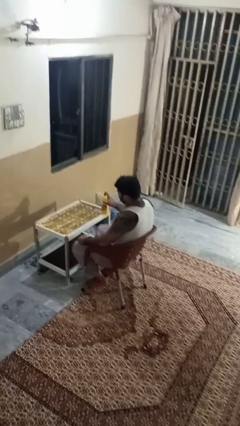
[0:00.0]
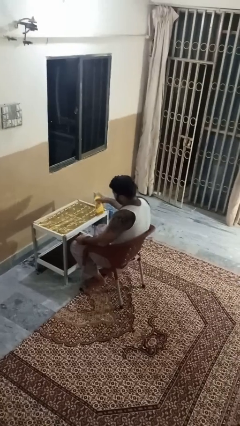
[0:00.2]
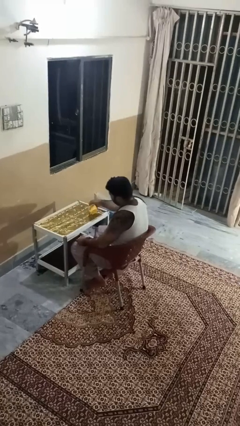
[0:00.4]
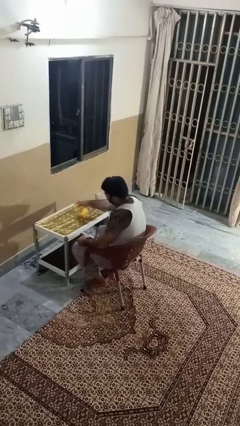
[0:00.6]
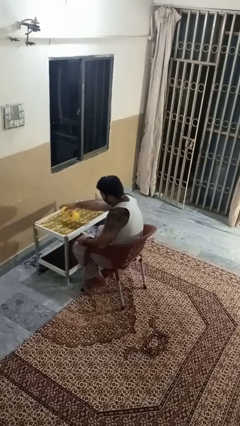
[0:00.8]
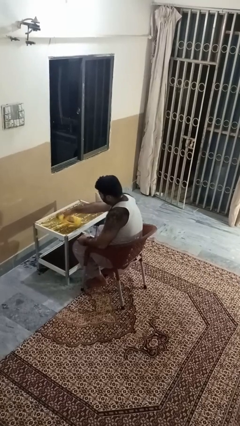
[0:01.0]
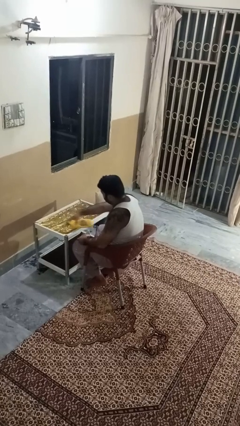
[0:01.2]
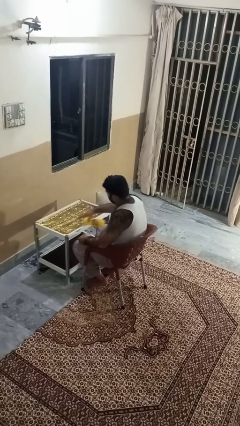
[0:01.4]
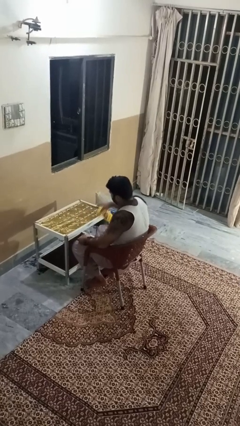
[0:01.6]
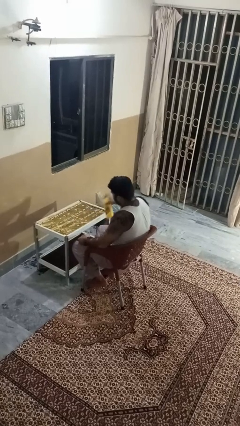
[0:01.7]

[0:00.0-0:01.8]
person sprays from bottle

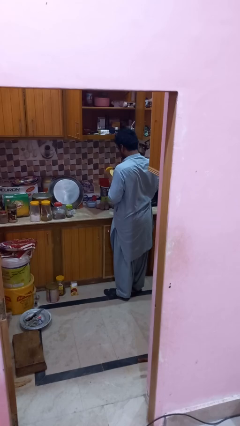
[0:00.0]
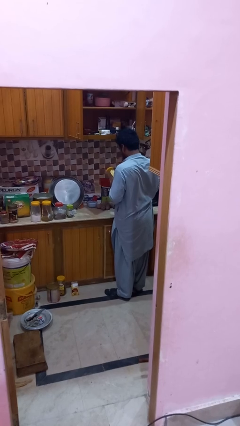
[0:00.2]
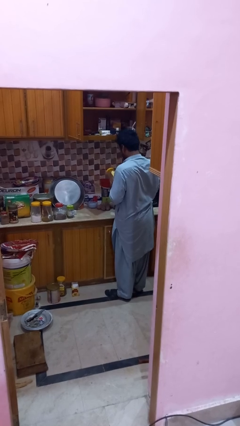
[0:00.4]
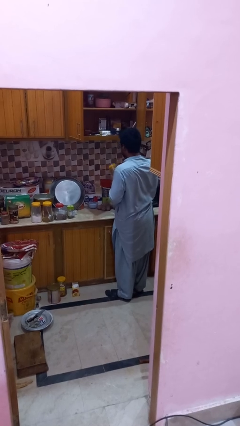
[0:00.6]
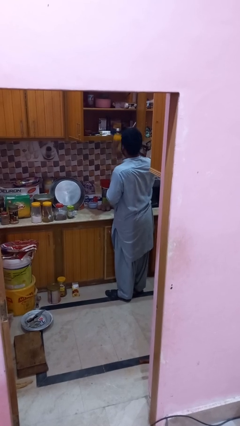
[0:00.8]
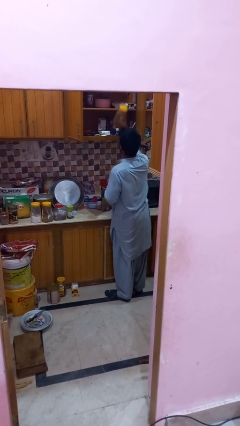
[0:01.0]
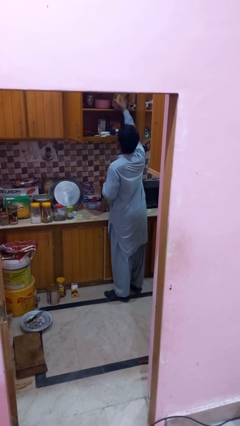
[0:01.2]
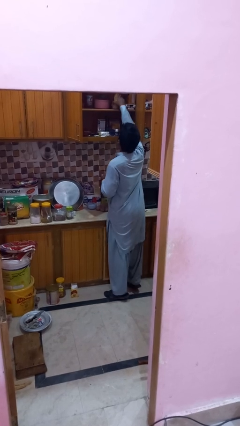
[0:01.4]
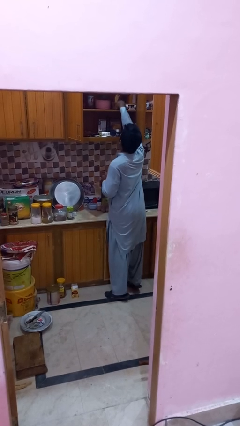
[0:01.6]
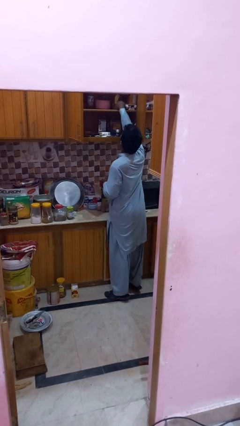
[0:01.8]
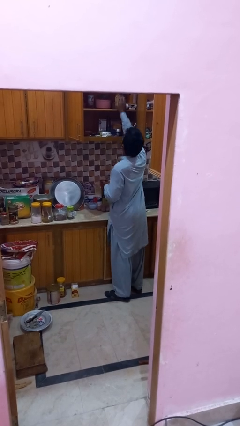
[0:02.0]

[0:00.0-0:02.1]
person puts object in cabinet

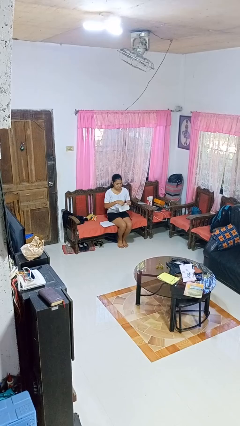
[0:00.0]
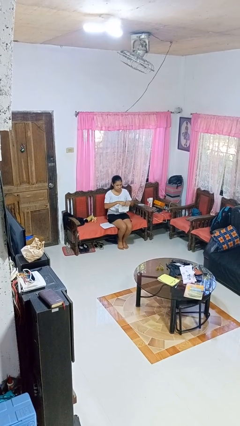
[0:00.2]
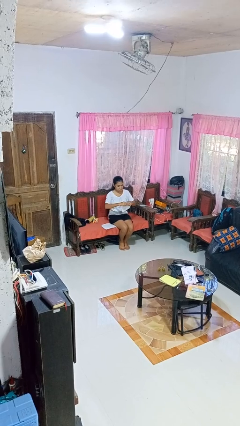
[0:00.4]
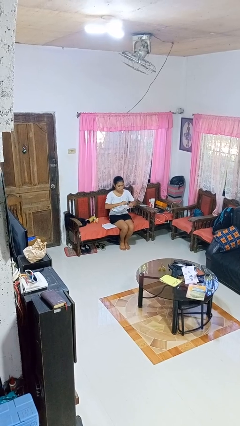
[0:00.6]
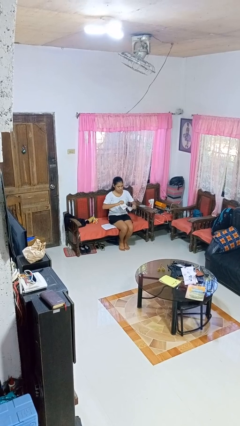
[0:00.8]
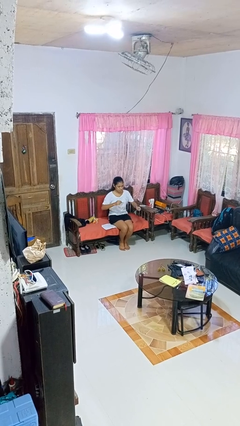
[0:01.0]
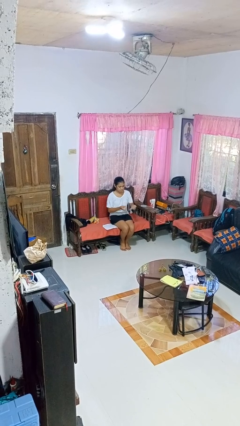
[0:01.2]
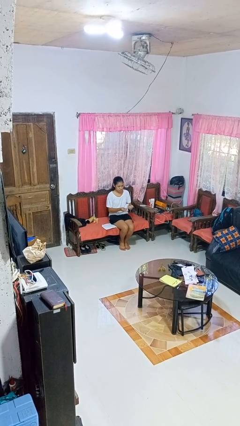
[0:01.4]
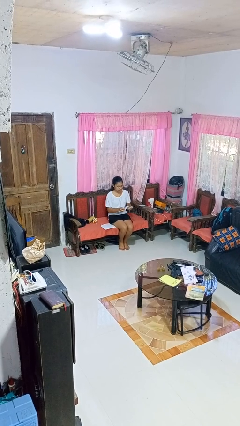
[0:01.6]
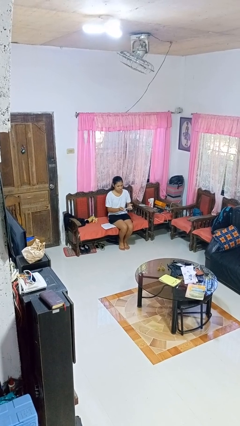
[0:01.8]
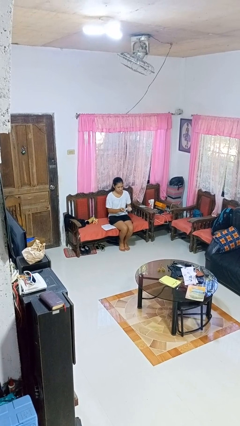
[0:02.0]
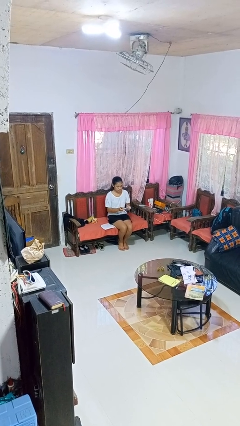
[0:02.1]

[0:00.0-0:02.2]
person tears paper

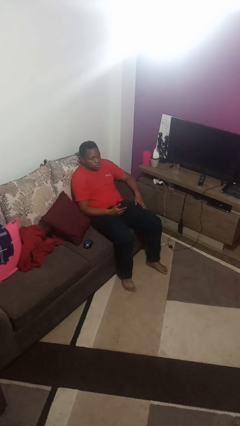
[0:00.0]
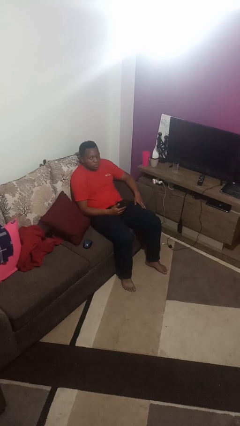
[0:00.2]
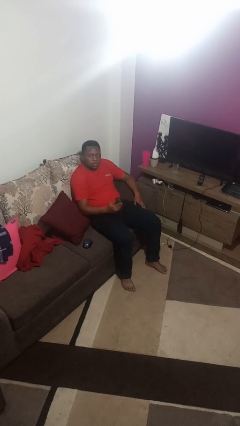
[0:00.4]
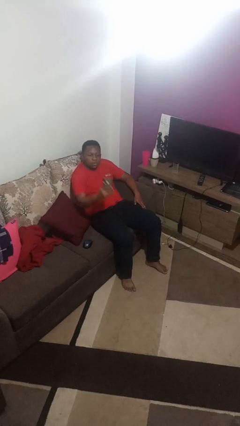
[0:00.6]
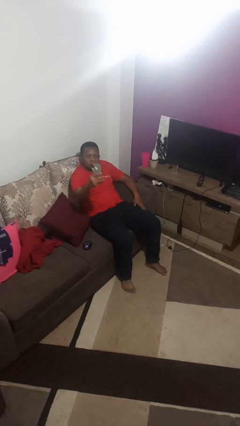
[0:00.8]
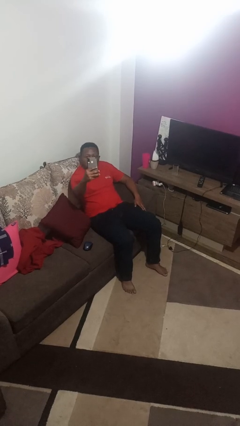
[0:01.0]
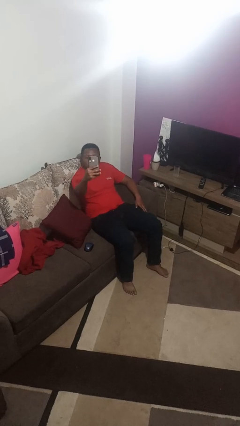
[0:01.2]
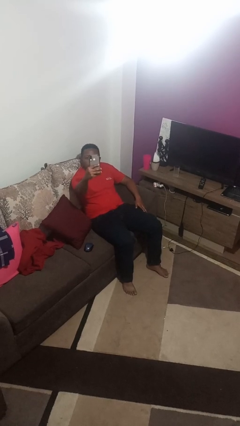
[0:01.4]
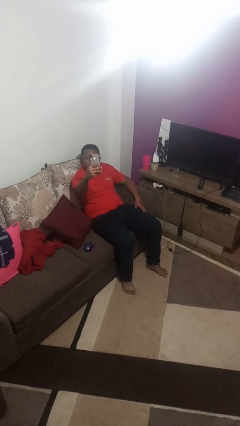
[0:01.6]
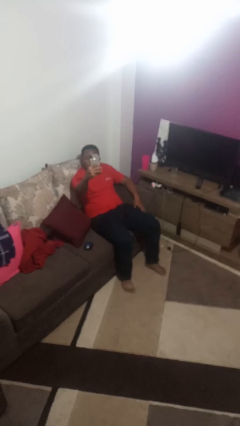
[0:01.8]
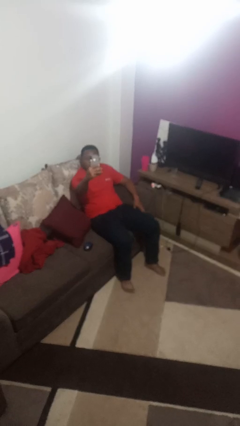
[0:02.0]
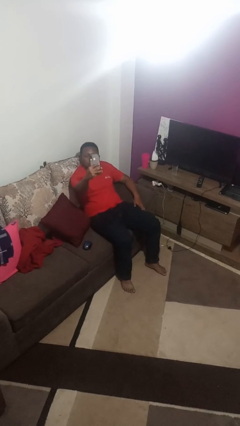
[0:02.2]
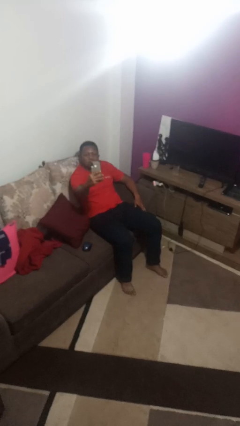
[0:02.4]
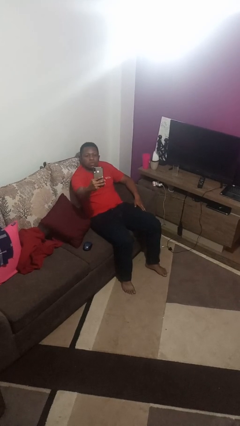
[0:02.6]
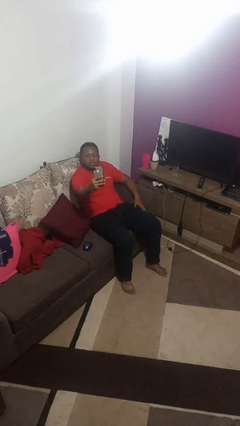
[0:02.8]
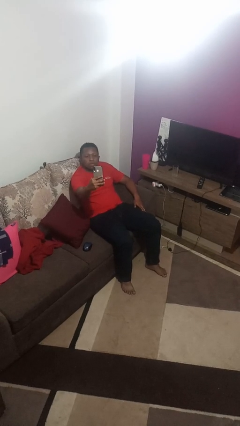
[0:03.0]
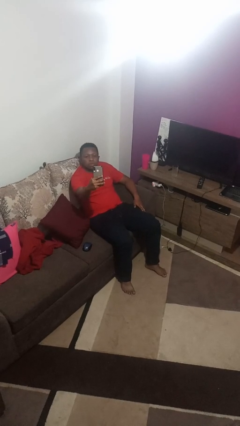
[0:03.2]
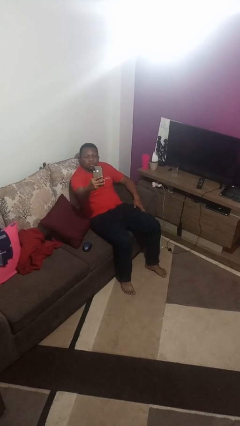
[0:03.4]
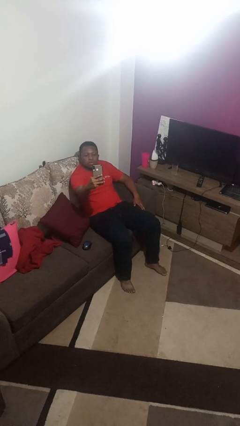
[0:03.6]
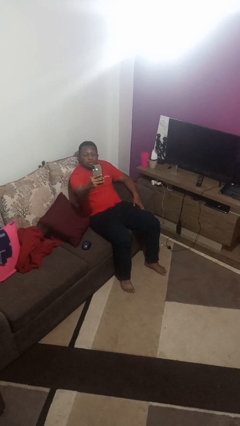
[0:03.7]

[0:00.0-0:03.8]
person takes selfie

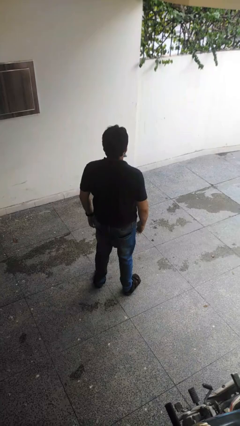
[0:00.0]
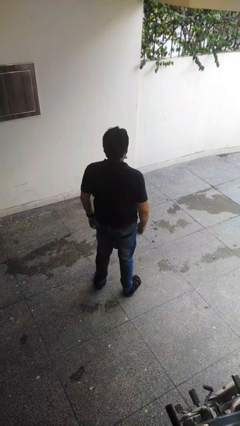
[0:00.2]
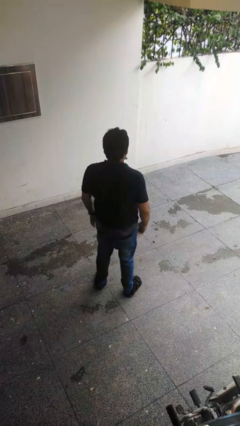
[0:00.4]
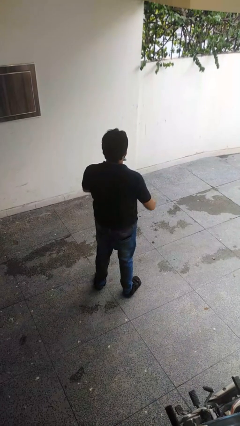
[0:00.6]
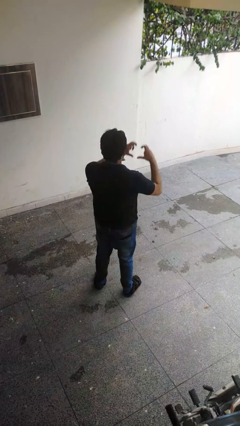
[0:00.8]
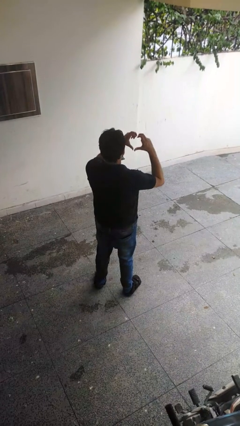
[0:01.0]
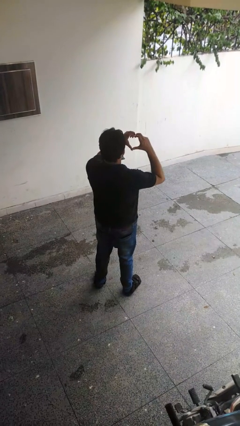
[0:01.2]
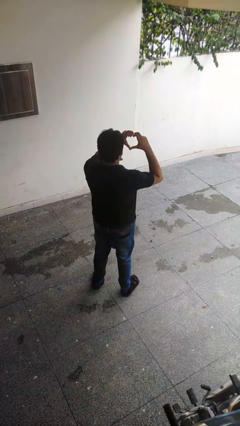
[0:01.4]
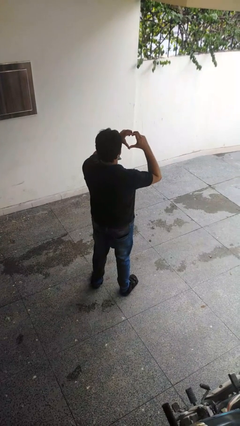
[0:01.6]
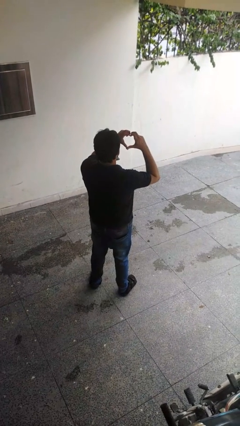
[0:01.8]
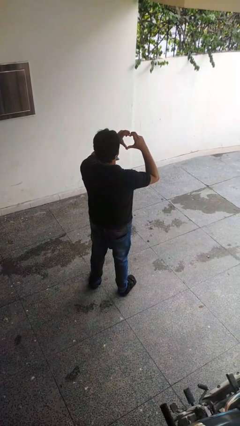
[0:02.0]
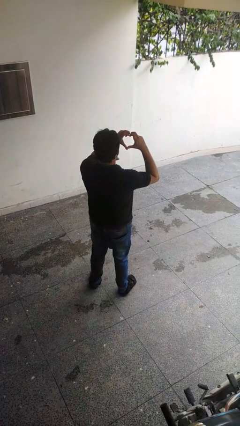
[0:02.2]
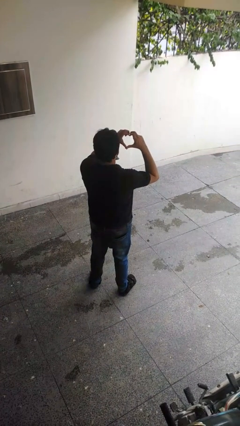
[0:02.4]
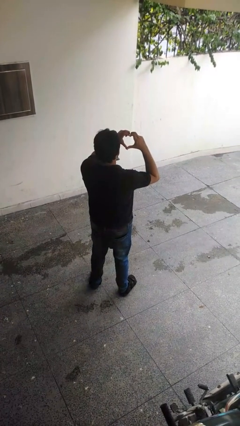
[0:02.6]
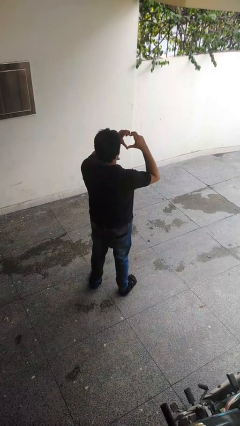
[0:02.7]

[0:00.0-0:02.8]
person gestures heart

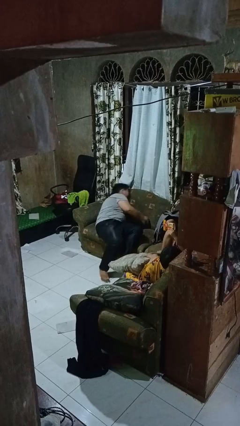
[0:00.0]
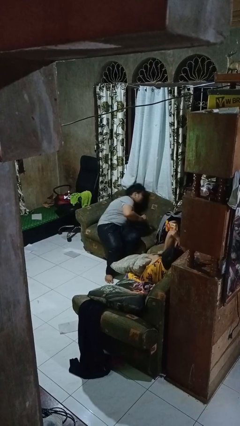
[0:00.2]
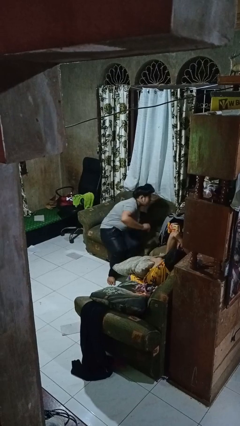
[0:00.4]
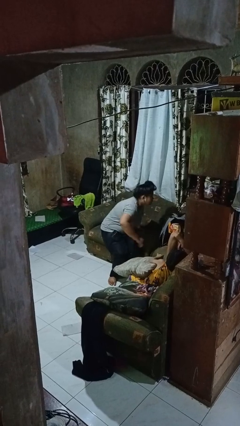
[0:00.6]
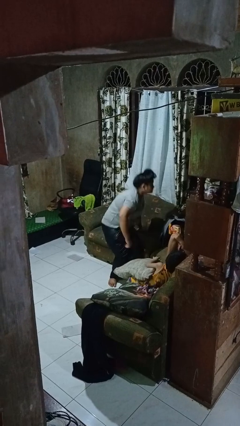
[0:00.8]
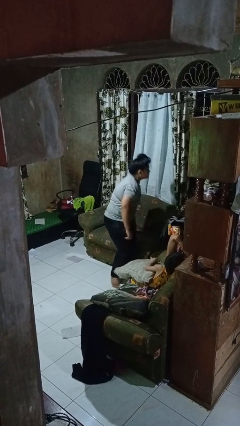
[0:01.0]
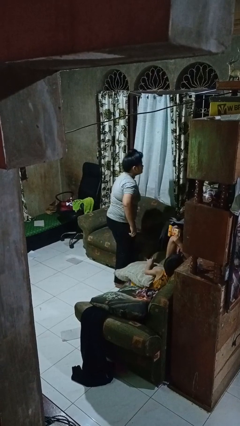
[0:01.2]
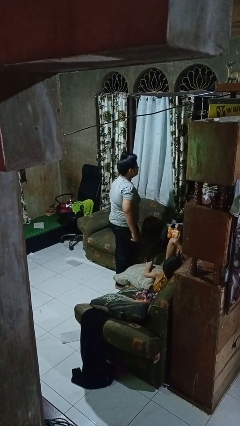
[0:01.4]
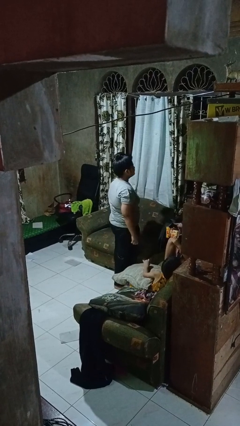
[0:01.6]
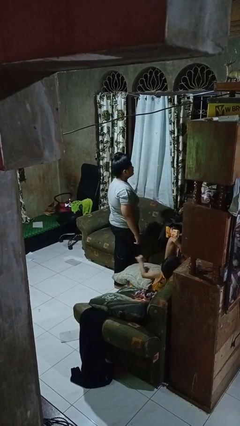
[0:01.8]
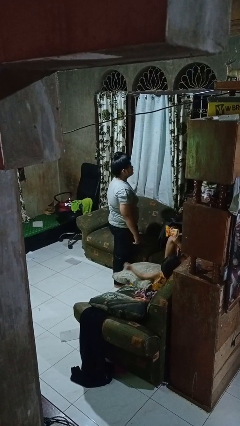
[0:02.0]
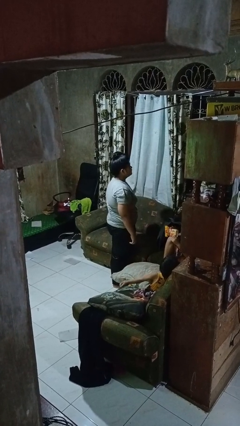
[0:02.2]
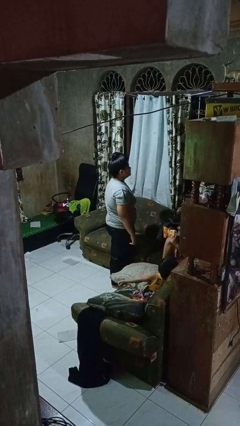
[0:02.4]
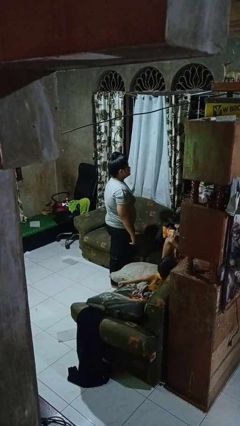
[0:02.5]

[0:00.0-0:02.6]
person stands up

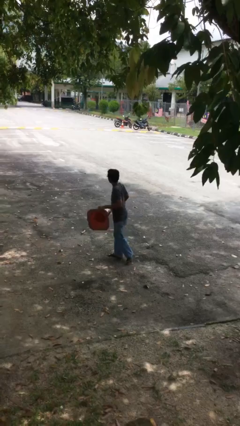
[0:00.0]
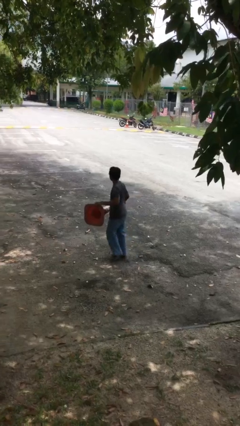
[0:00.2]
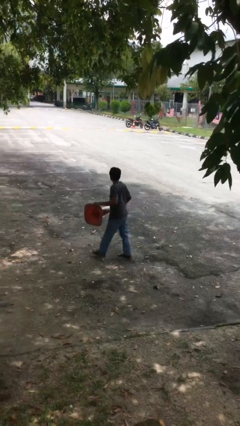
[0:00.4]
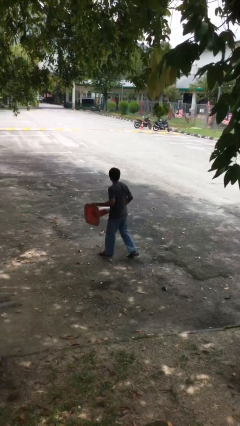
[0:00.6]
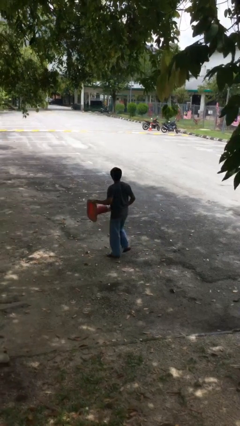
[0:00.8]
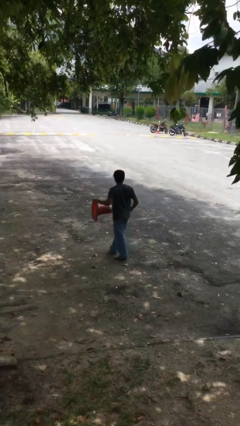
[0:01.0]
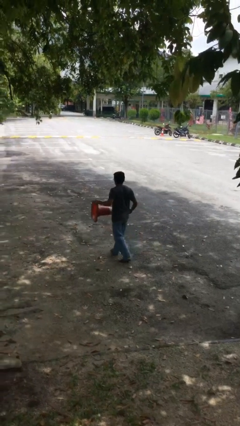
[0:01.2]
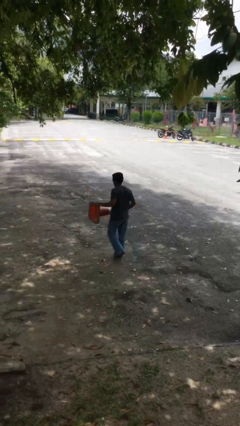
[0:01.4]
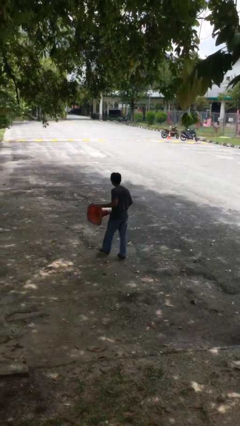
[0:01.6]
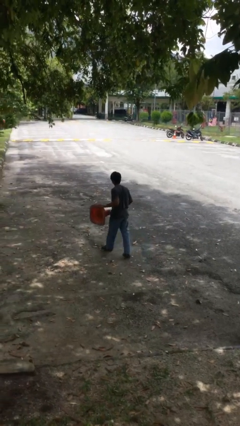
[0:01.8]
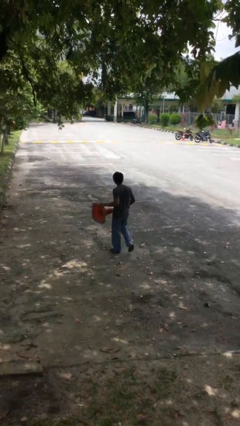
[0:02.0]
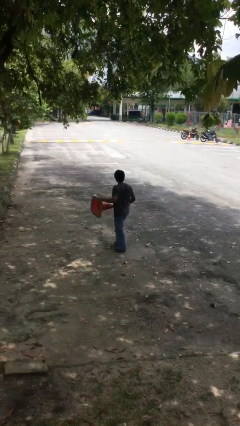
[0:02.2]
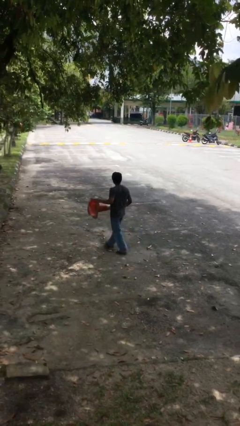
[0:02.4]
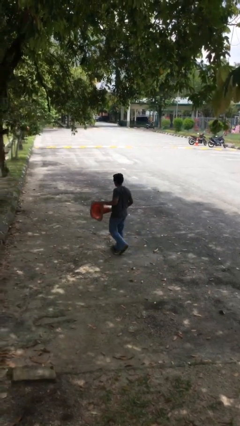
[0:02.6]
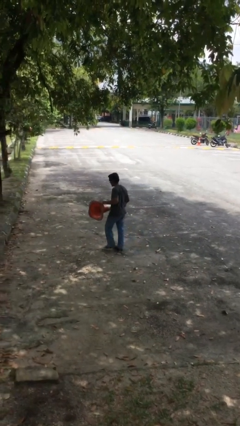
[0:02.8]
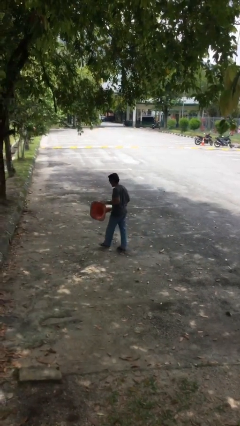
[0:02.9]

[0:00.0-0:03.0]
person carries heavy object
